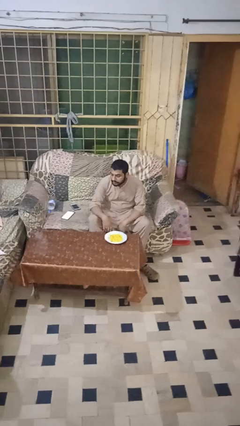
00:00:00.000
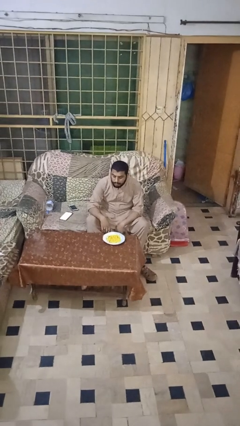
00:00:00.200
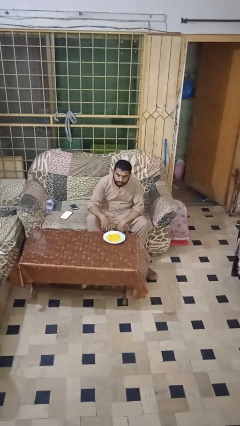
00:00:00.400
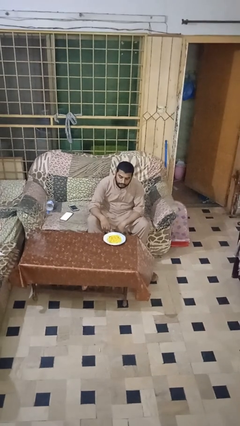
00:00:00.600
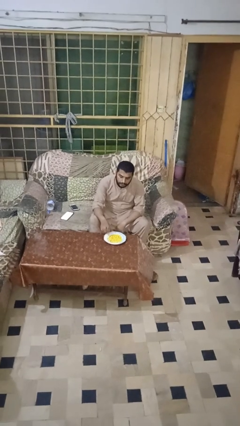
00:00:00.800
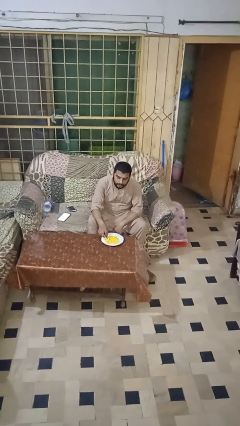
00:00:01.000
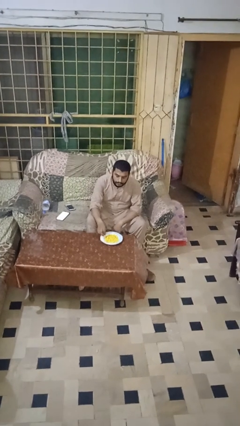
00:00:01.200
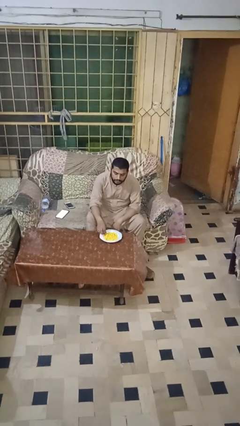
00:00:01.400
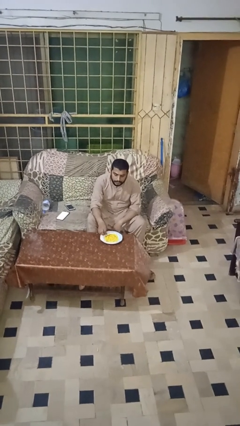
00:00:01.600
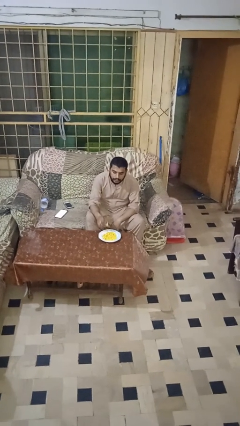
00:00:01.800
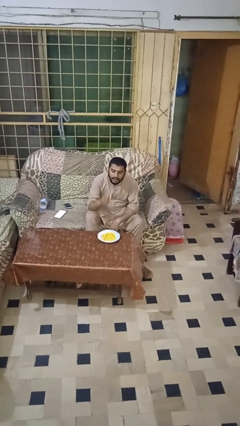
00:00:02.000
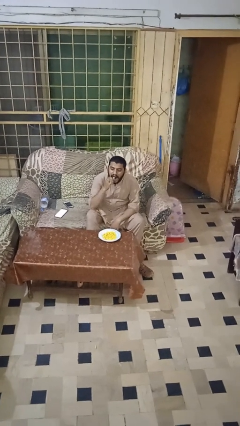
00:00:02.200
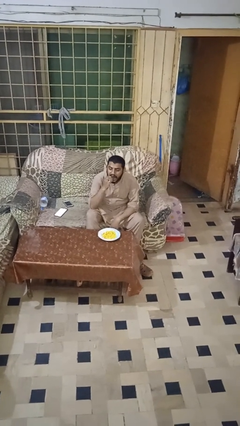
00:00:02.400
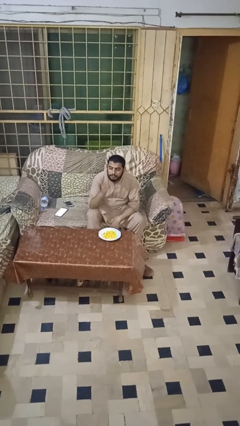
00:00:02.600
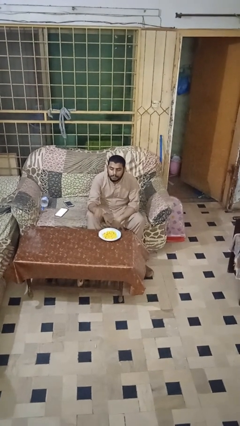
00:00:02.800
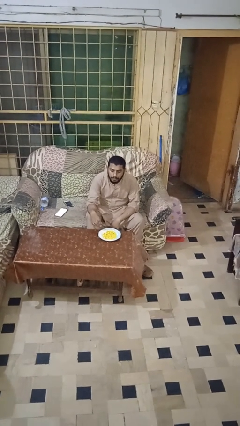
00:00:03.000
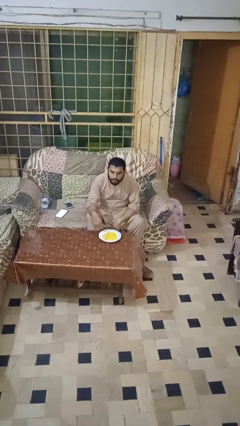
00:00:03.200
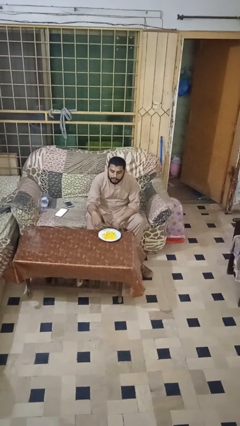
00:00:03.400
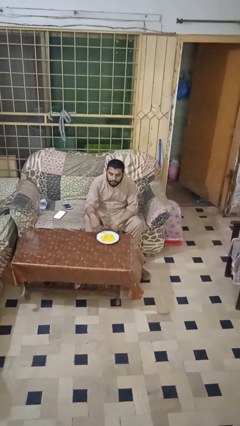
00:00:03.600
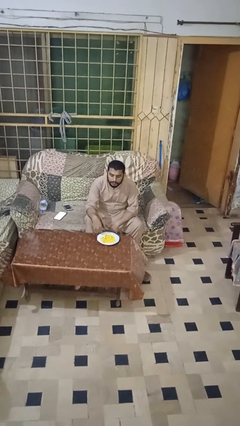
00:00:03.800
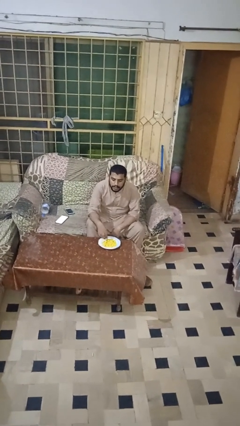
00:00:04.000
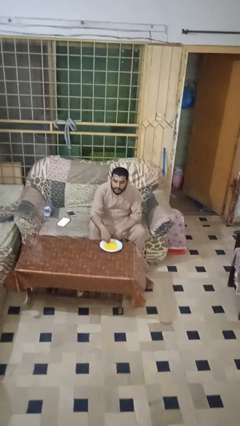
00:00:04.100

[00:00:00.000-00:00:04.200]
person eats with hands

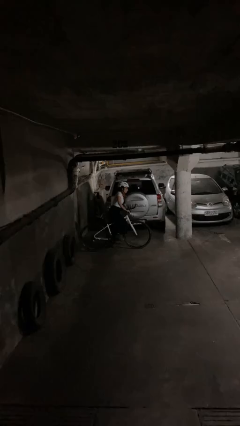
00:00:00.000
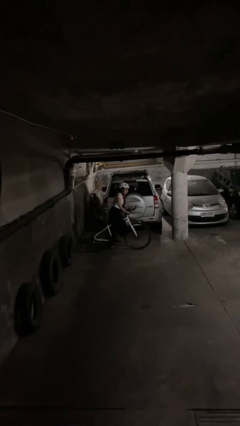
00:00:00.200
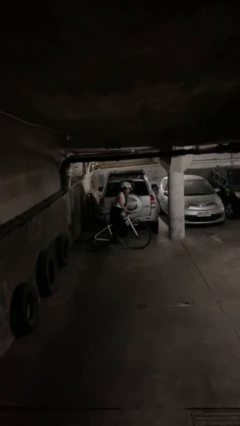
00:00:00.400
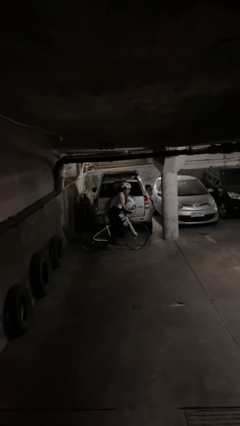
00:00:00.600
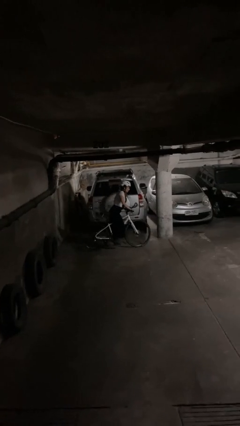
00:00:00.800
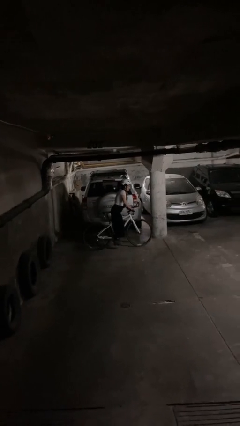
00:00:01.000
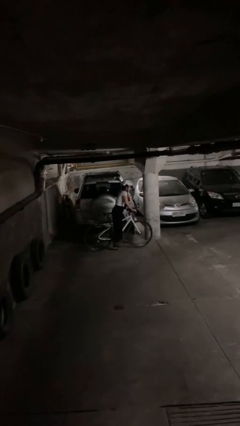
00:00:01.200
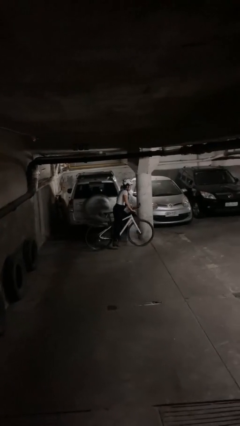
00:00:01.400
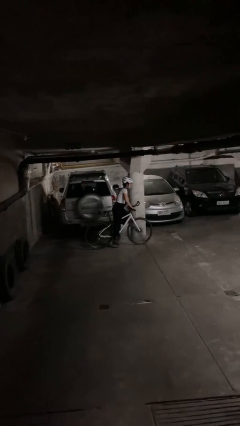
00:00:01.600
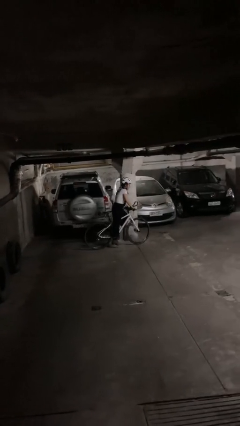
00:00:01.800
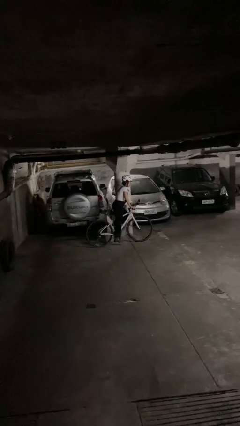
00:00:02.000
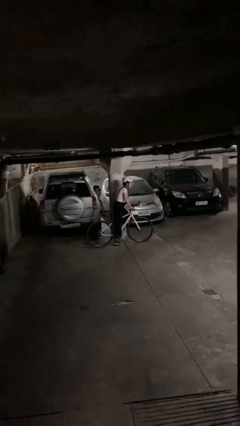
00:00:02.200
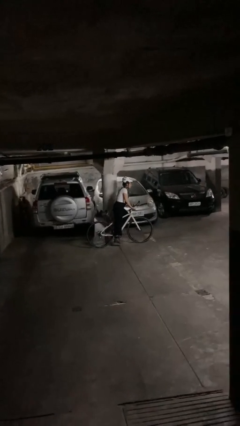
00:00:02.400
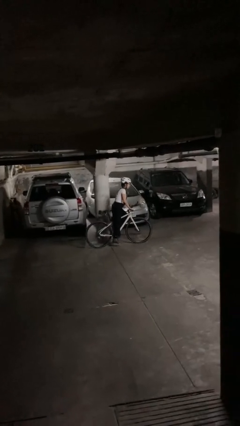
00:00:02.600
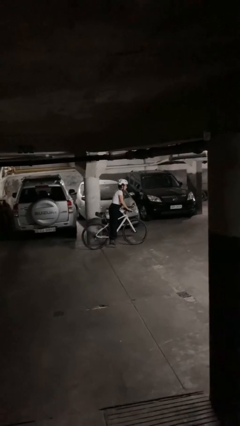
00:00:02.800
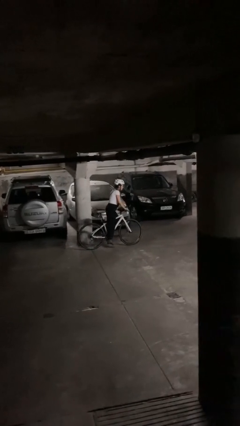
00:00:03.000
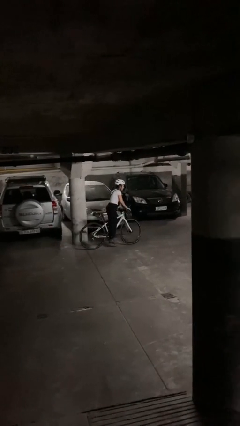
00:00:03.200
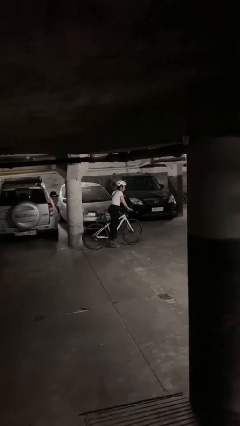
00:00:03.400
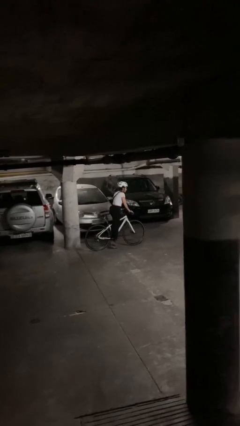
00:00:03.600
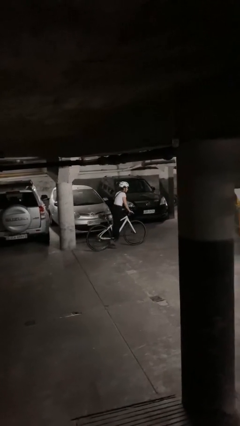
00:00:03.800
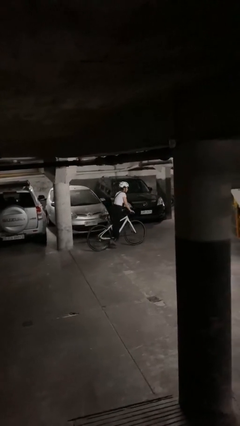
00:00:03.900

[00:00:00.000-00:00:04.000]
person rides bicycle

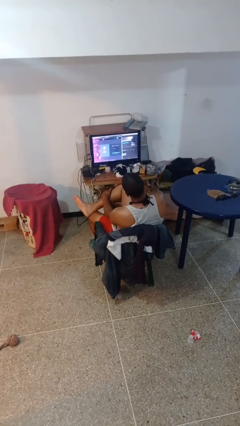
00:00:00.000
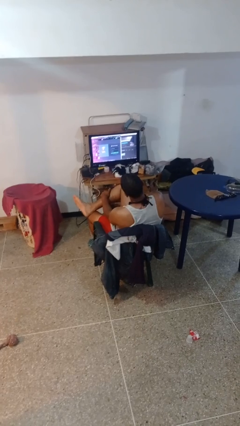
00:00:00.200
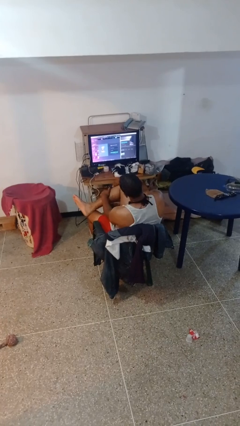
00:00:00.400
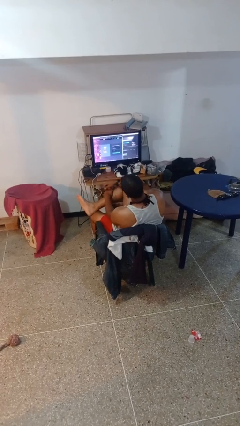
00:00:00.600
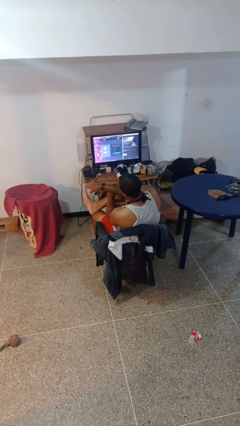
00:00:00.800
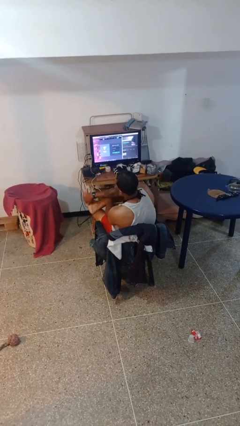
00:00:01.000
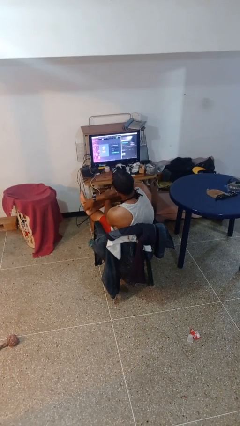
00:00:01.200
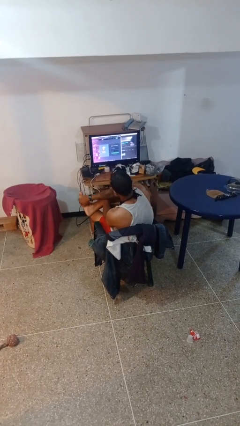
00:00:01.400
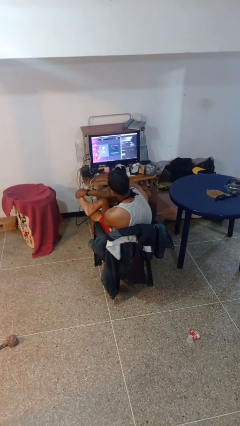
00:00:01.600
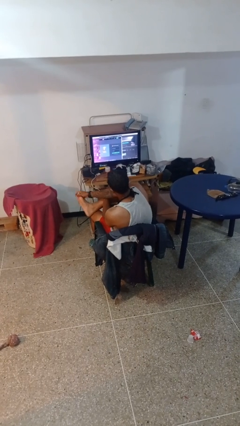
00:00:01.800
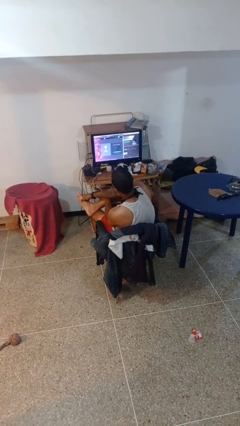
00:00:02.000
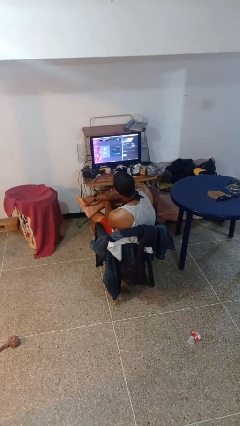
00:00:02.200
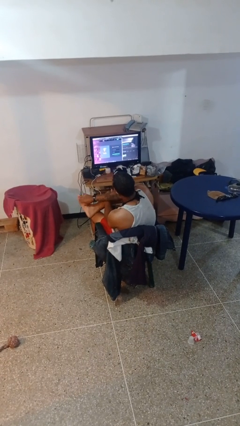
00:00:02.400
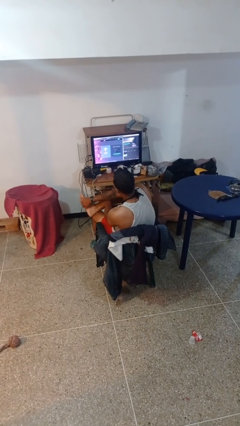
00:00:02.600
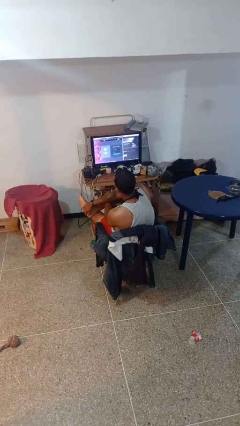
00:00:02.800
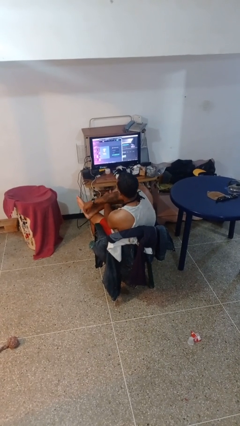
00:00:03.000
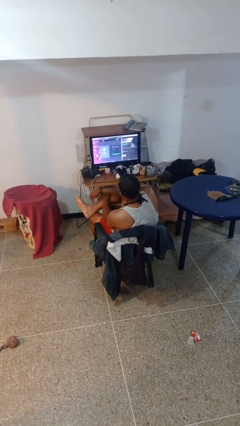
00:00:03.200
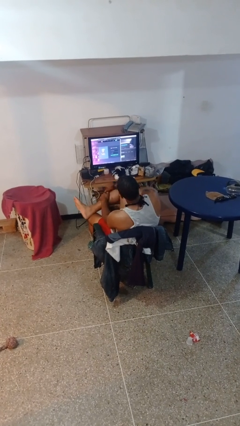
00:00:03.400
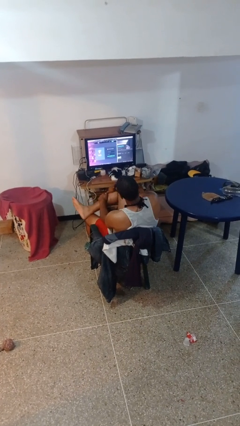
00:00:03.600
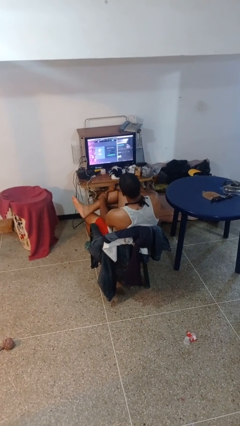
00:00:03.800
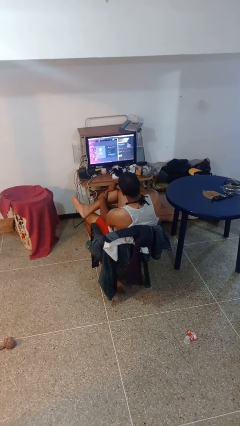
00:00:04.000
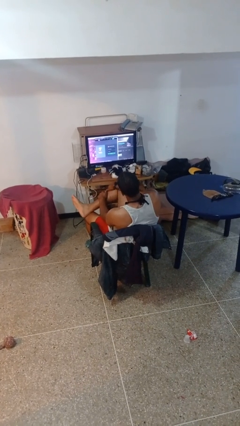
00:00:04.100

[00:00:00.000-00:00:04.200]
person rubs foot

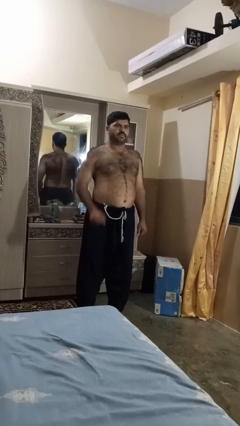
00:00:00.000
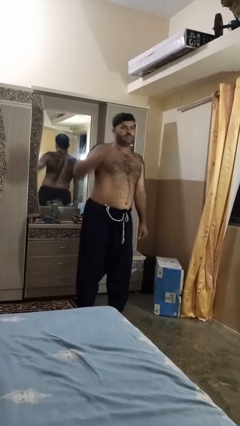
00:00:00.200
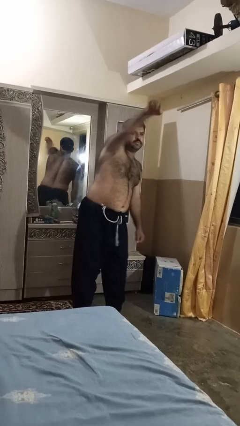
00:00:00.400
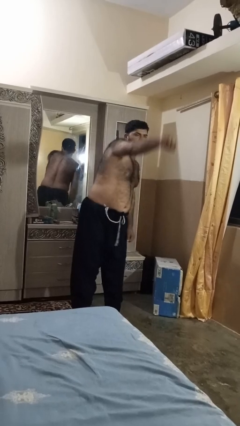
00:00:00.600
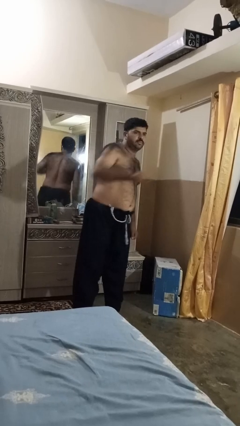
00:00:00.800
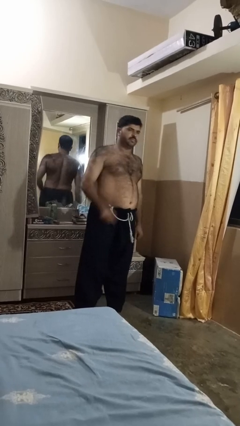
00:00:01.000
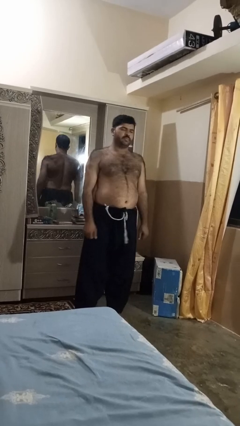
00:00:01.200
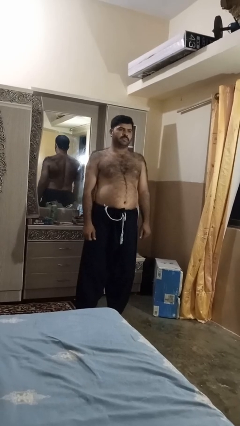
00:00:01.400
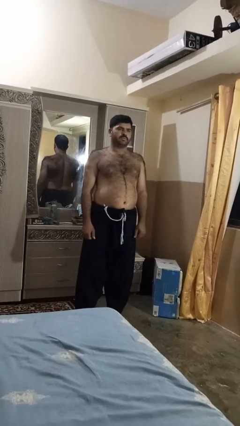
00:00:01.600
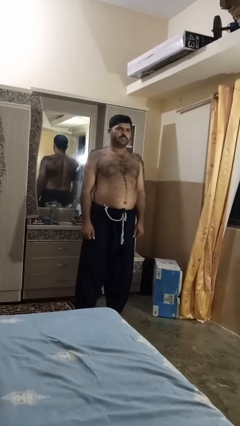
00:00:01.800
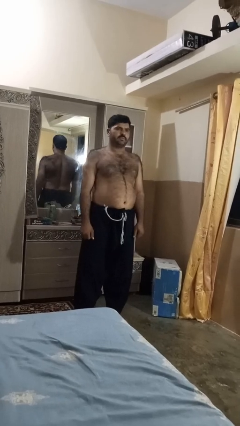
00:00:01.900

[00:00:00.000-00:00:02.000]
person karate chop

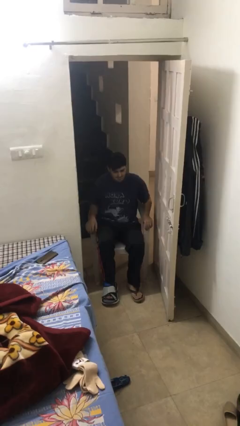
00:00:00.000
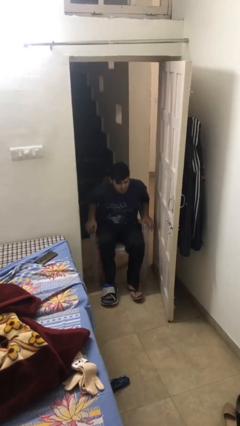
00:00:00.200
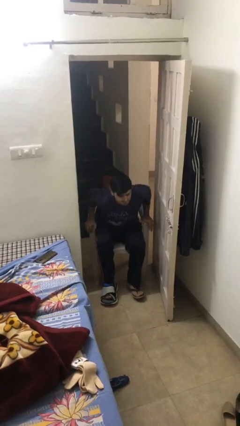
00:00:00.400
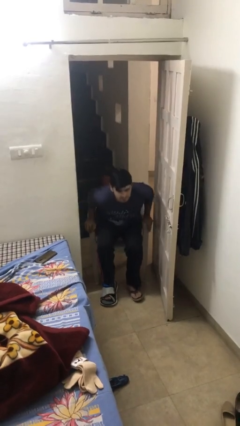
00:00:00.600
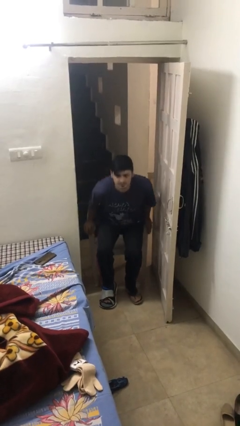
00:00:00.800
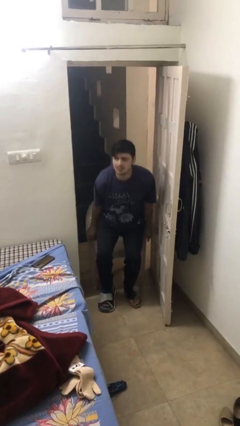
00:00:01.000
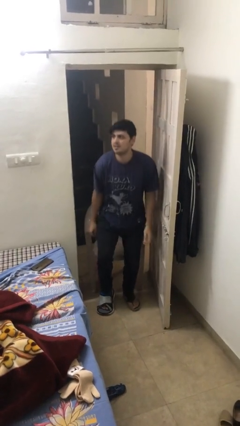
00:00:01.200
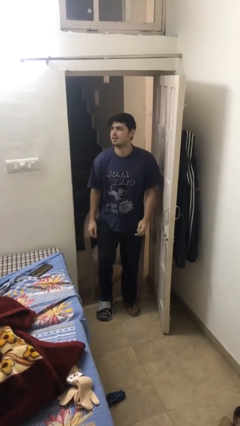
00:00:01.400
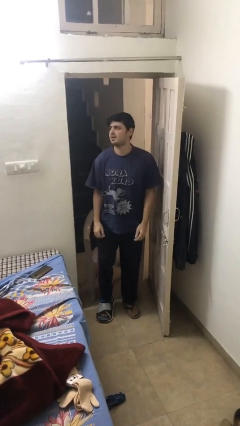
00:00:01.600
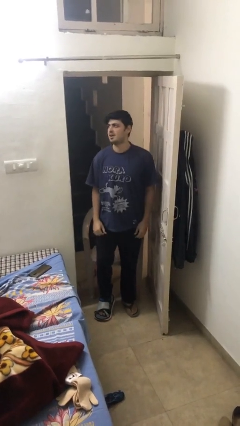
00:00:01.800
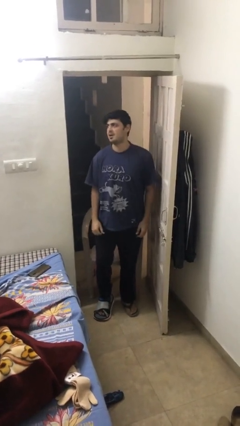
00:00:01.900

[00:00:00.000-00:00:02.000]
person stands up

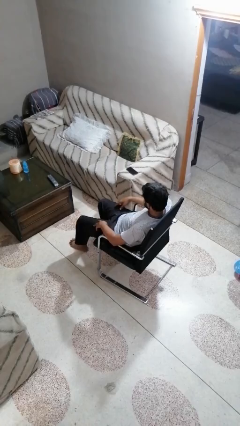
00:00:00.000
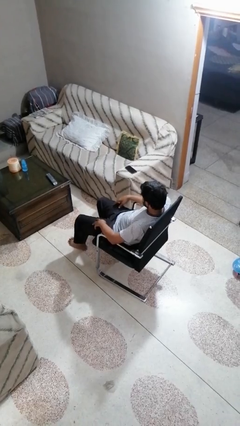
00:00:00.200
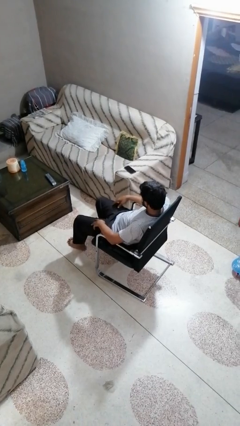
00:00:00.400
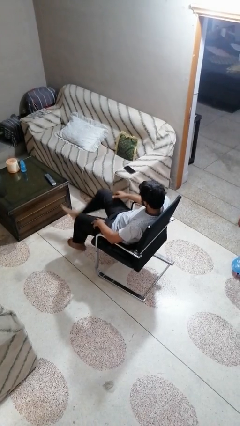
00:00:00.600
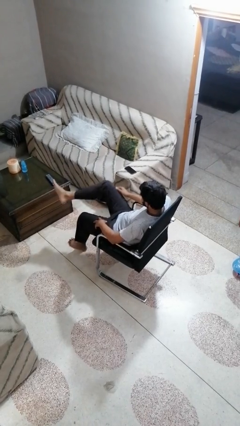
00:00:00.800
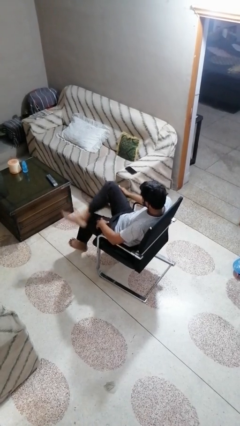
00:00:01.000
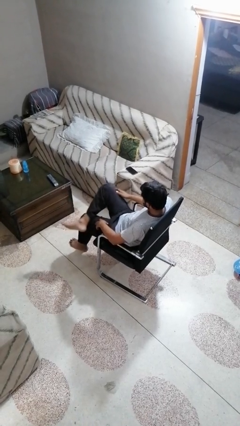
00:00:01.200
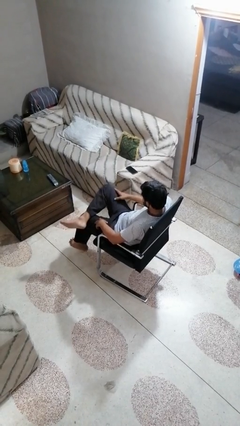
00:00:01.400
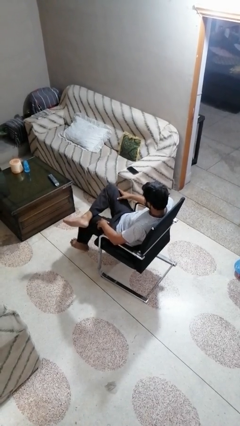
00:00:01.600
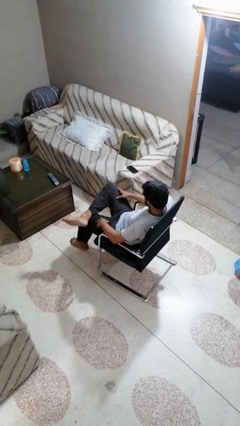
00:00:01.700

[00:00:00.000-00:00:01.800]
person crosses legs
